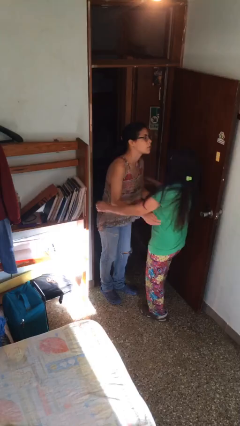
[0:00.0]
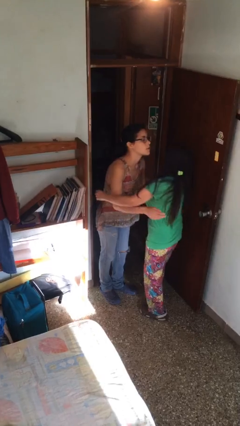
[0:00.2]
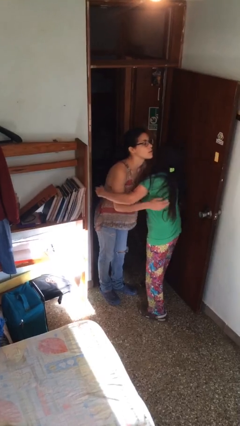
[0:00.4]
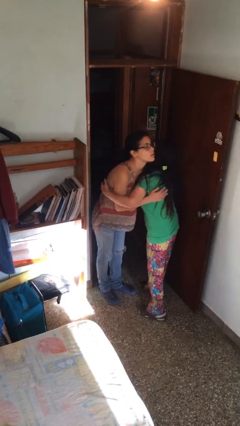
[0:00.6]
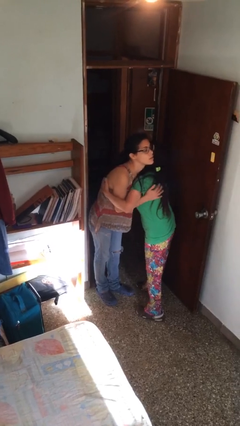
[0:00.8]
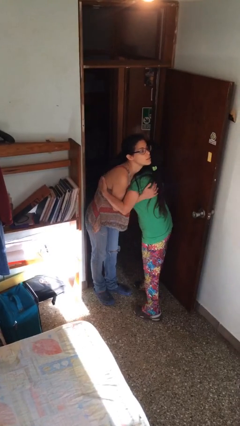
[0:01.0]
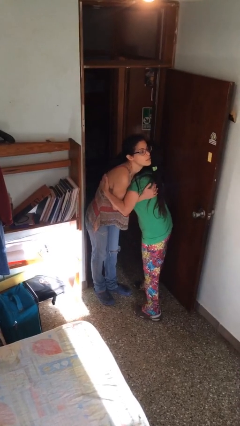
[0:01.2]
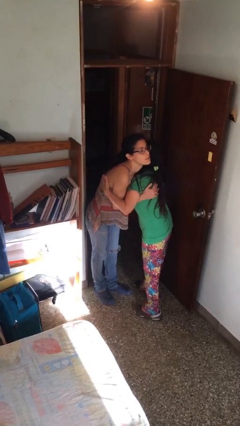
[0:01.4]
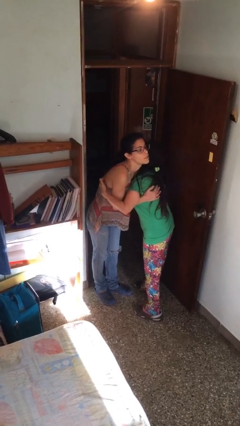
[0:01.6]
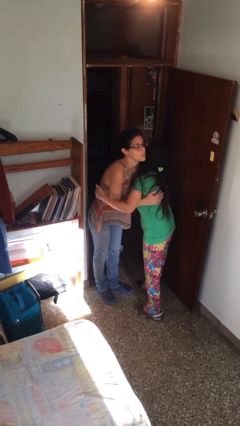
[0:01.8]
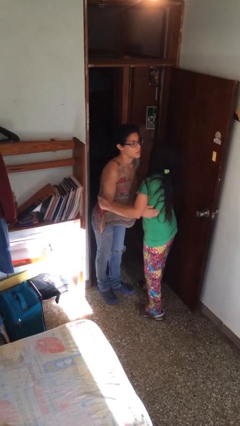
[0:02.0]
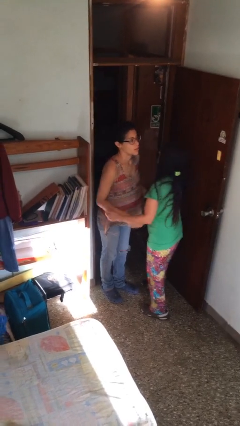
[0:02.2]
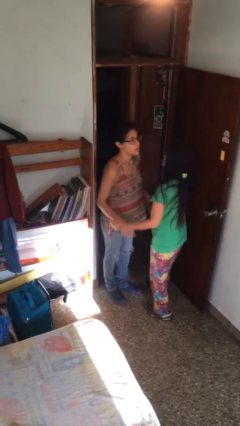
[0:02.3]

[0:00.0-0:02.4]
person embraces person

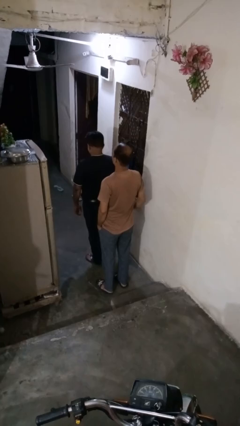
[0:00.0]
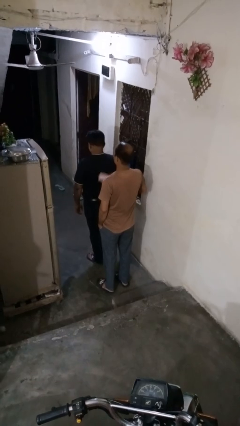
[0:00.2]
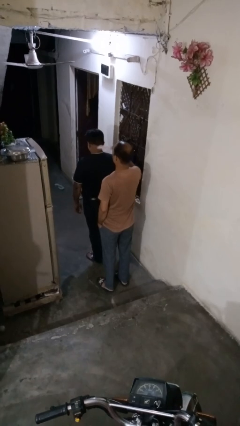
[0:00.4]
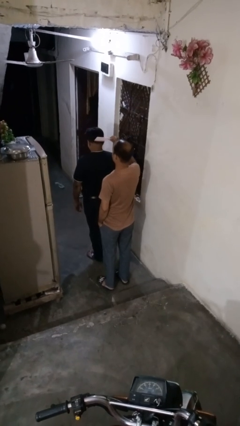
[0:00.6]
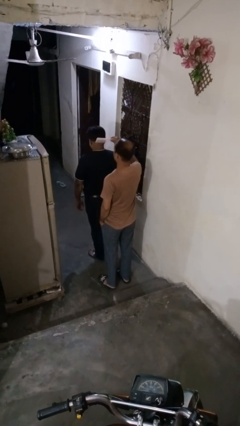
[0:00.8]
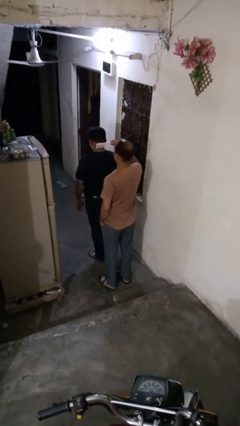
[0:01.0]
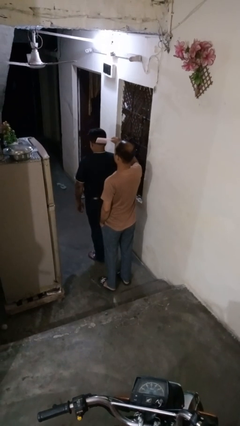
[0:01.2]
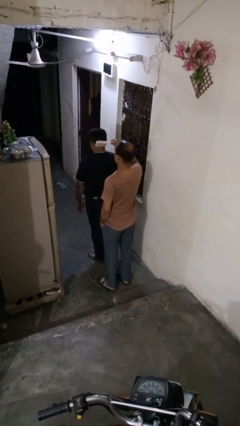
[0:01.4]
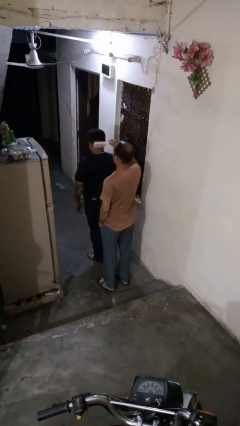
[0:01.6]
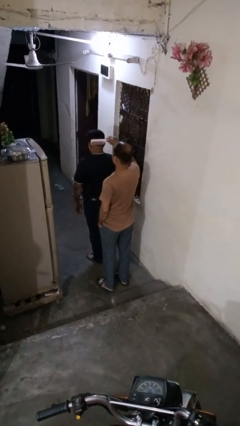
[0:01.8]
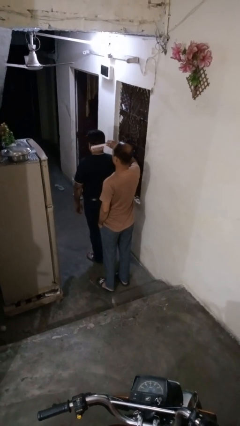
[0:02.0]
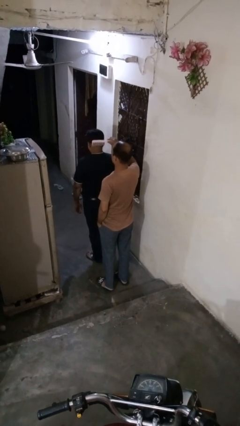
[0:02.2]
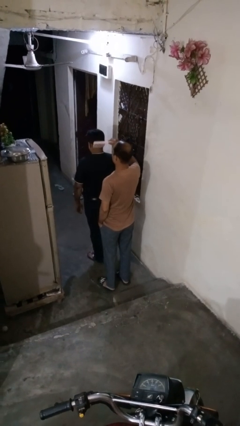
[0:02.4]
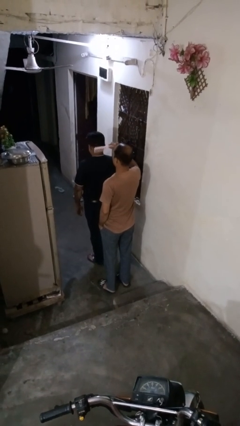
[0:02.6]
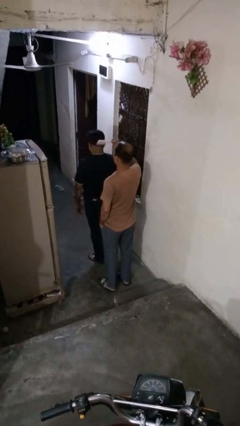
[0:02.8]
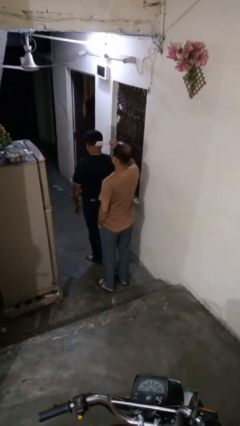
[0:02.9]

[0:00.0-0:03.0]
person brushes hair of person

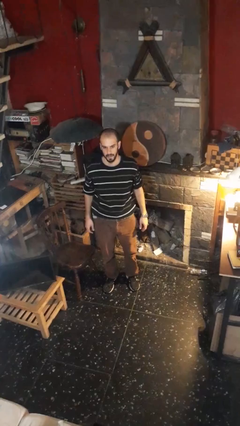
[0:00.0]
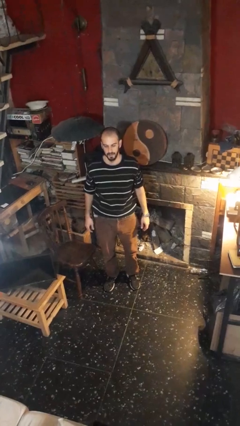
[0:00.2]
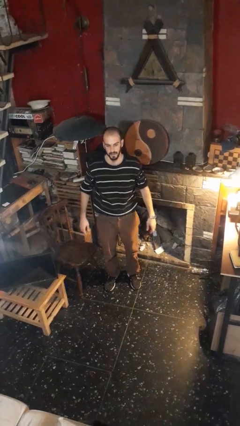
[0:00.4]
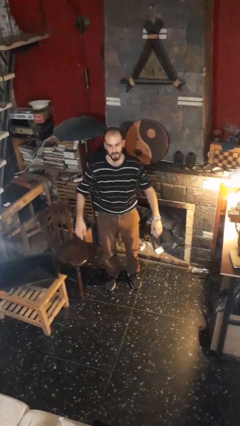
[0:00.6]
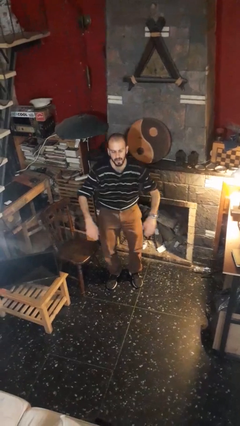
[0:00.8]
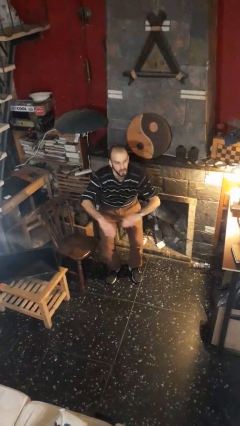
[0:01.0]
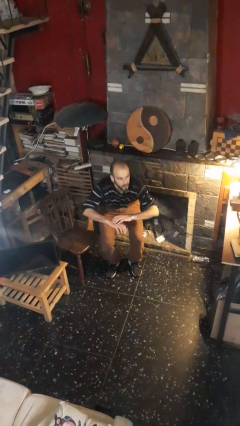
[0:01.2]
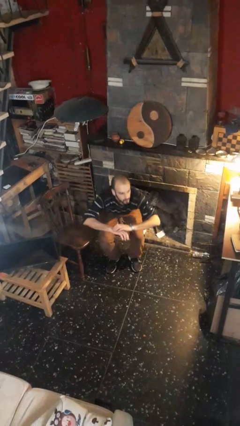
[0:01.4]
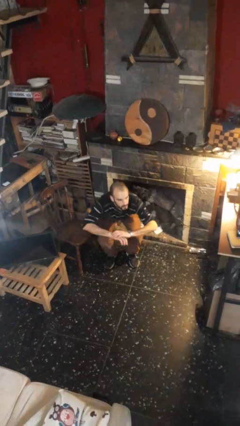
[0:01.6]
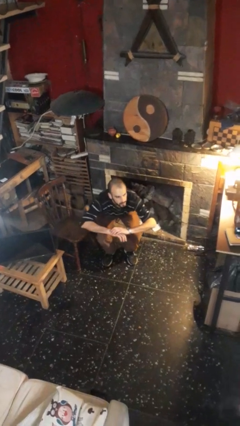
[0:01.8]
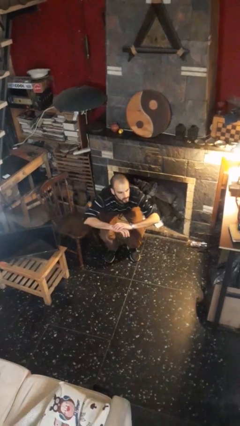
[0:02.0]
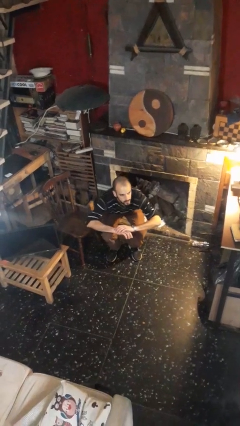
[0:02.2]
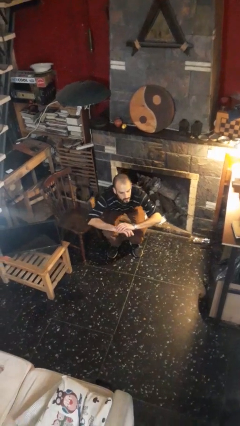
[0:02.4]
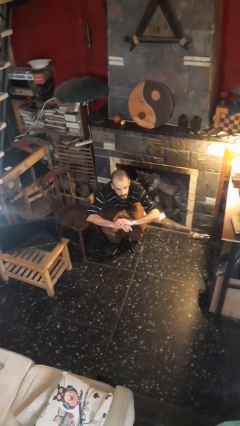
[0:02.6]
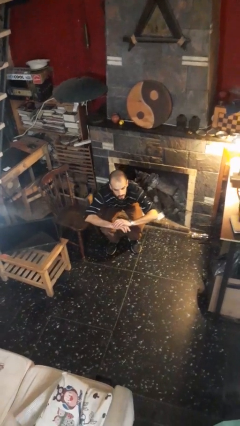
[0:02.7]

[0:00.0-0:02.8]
person squats

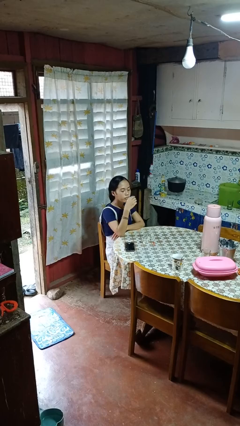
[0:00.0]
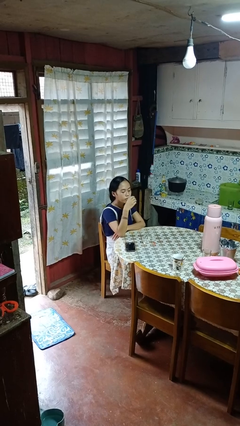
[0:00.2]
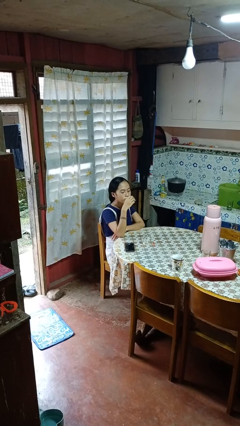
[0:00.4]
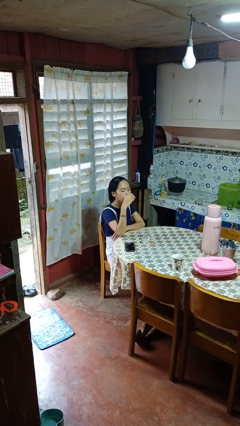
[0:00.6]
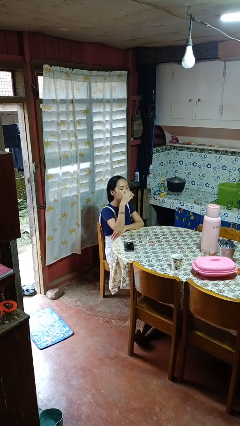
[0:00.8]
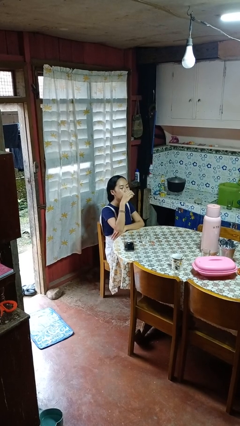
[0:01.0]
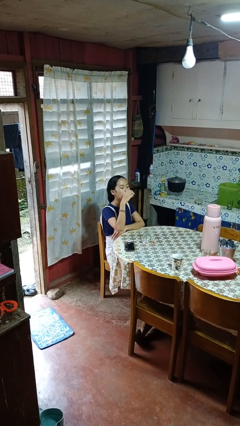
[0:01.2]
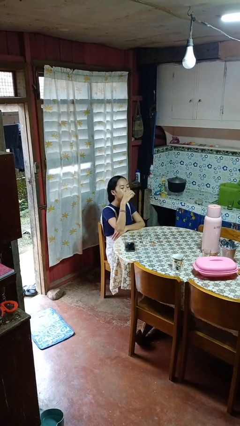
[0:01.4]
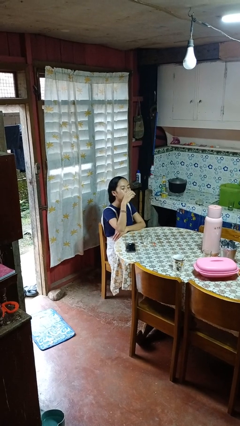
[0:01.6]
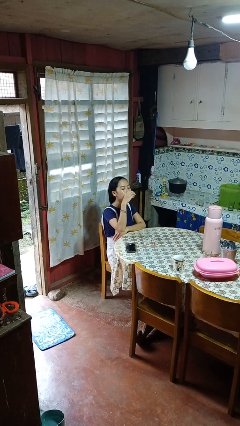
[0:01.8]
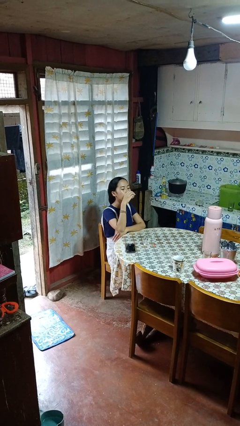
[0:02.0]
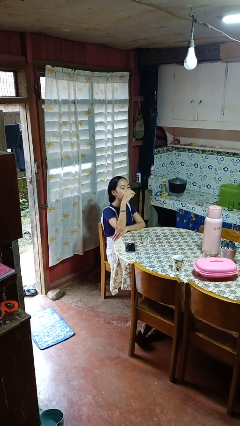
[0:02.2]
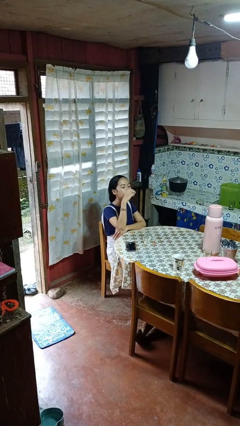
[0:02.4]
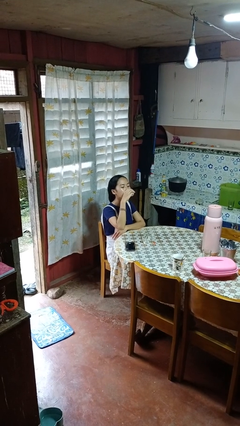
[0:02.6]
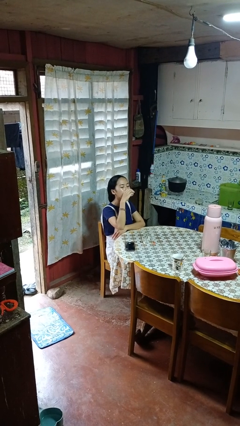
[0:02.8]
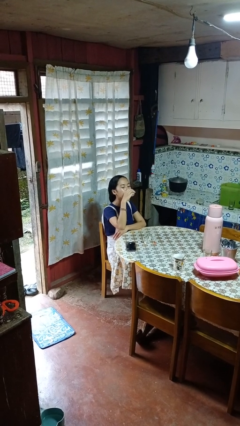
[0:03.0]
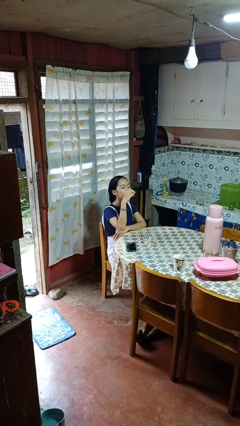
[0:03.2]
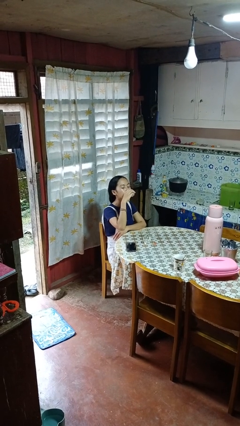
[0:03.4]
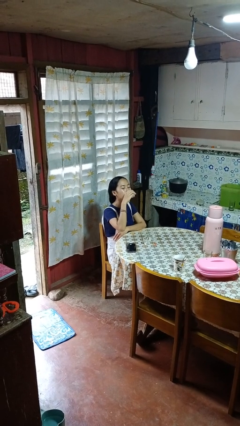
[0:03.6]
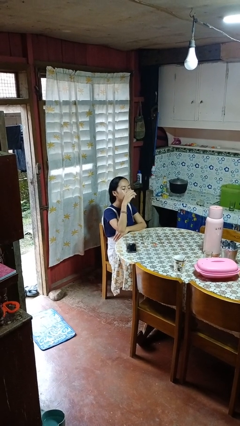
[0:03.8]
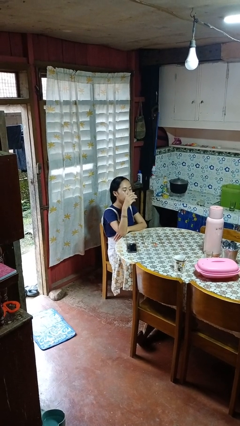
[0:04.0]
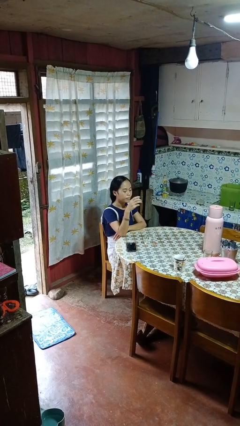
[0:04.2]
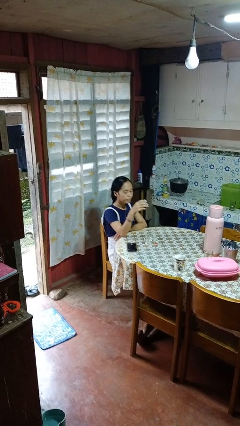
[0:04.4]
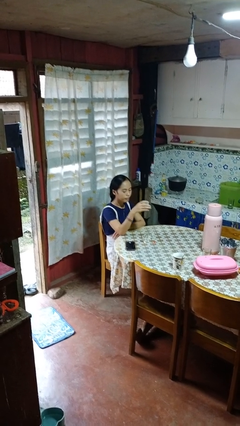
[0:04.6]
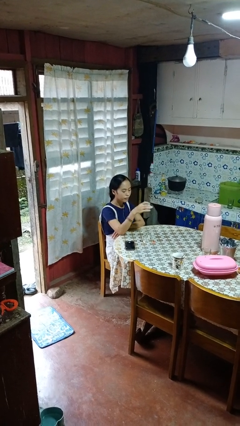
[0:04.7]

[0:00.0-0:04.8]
person drinks from shotglass

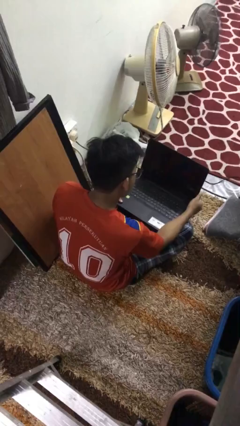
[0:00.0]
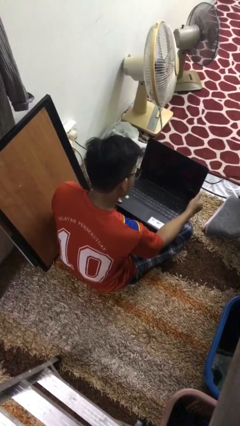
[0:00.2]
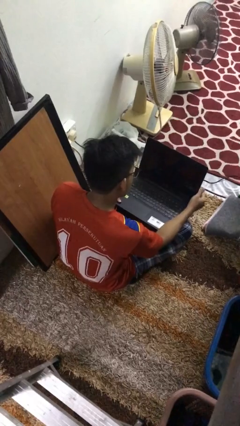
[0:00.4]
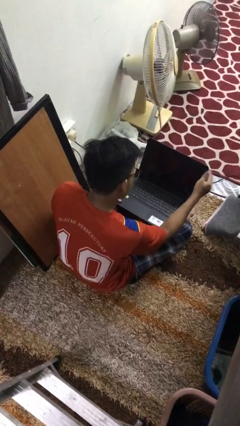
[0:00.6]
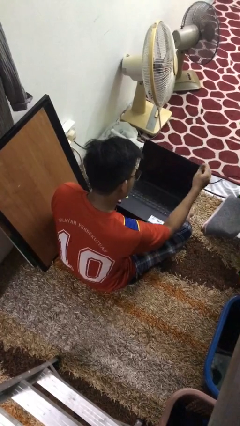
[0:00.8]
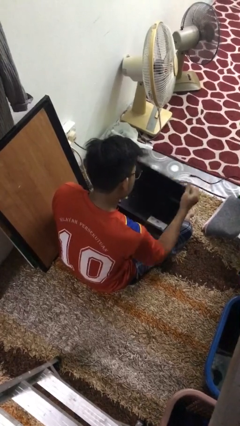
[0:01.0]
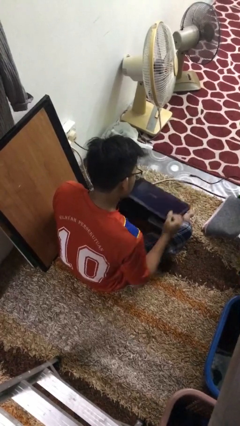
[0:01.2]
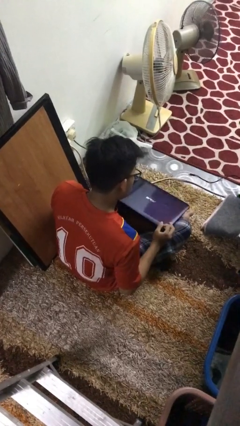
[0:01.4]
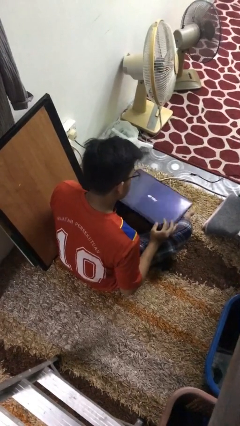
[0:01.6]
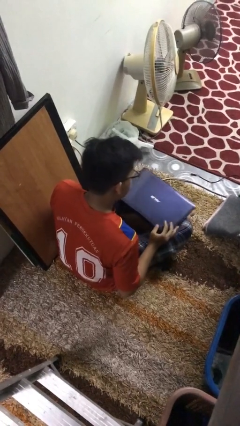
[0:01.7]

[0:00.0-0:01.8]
person closes laptop

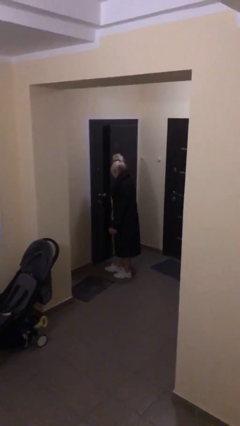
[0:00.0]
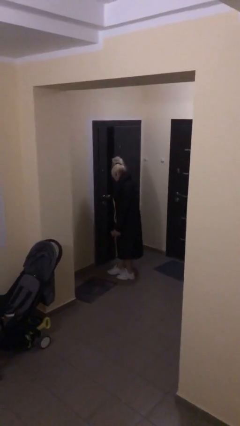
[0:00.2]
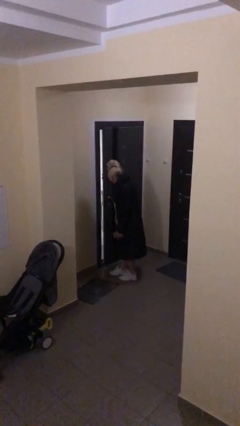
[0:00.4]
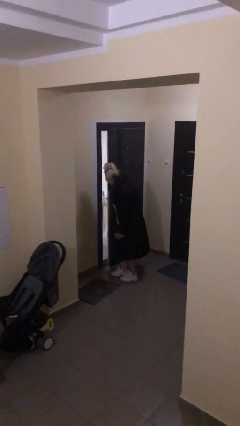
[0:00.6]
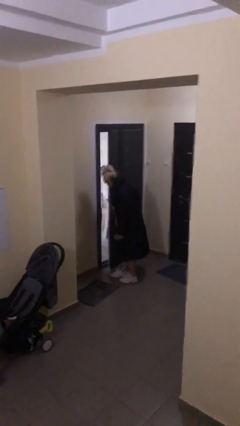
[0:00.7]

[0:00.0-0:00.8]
person opens facility door

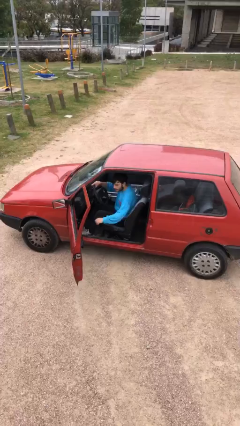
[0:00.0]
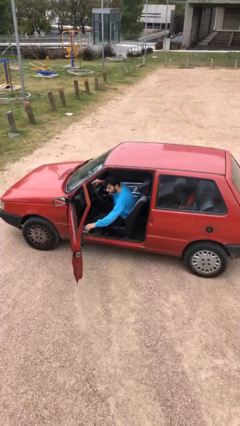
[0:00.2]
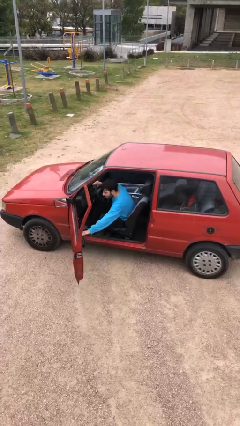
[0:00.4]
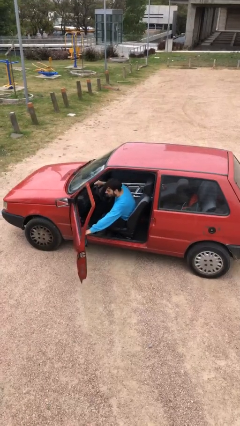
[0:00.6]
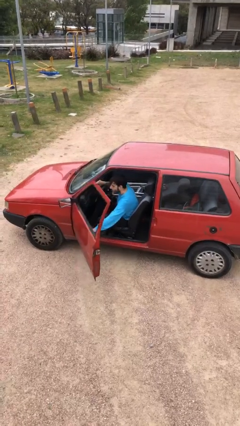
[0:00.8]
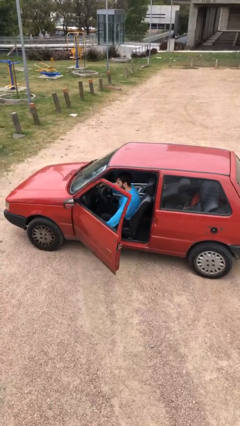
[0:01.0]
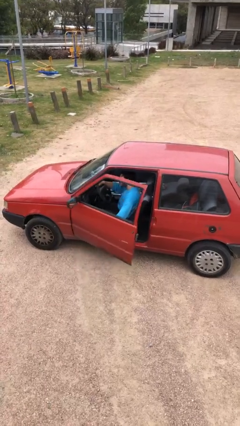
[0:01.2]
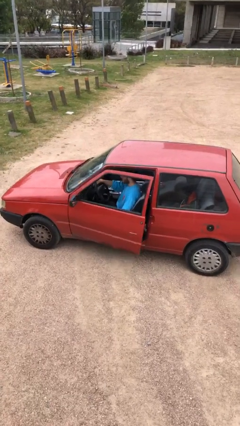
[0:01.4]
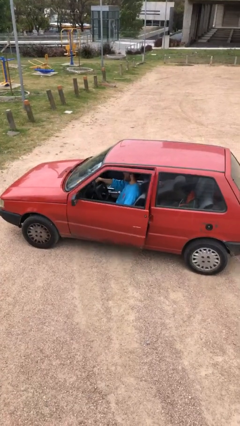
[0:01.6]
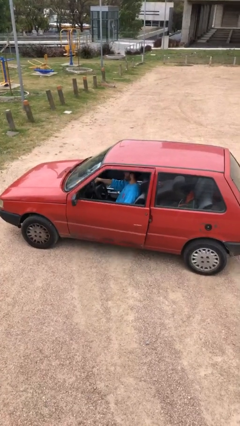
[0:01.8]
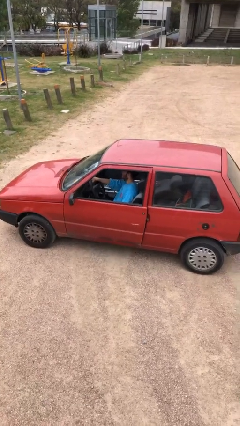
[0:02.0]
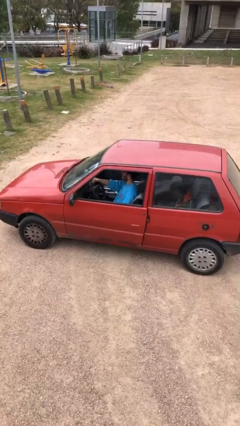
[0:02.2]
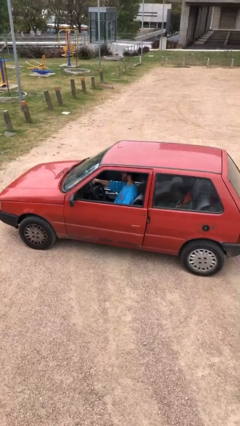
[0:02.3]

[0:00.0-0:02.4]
person closes car door
